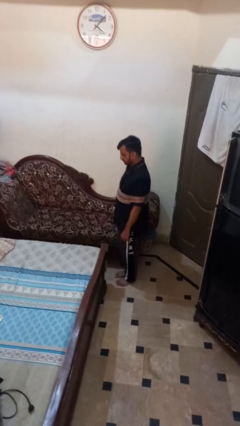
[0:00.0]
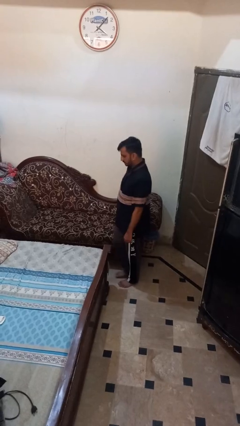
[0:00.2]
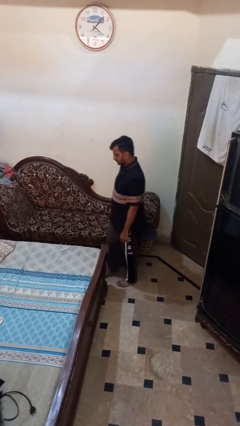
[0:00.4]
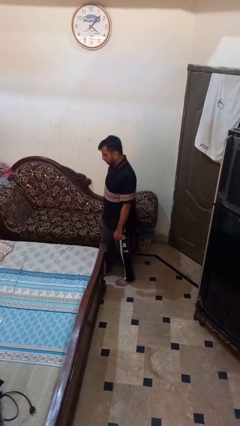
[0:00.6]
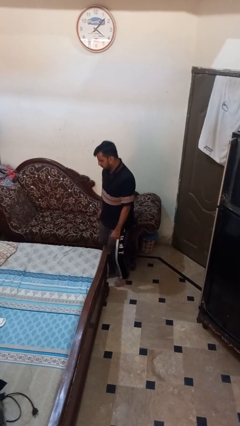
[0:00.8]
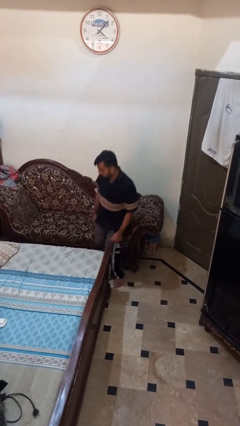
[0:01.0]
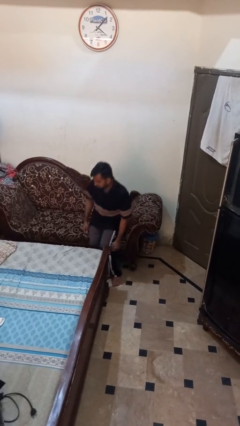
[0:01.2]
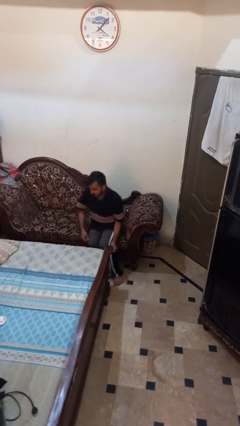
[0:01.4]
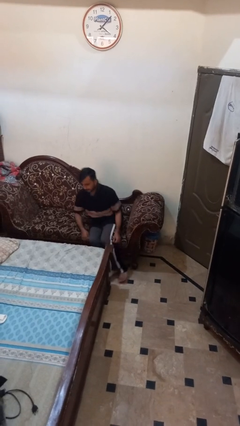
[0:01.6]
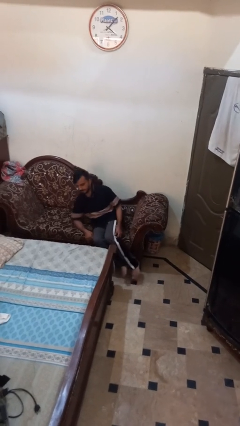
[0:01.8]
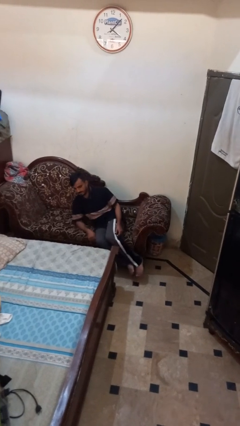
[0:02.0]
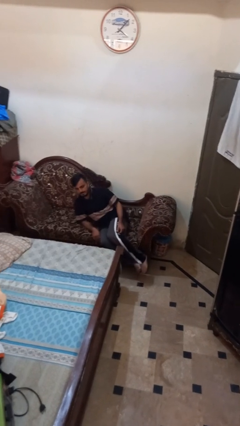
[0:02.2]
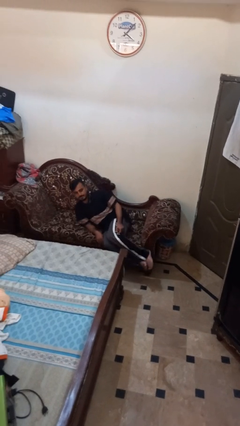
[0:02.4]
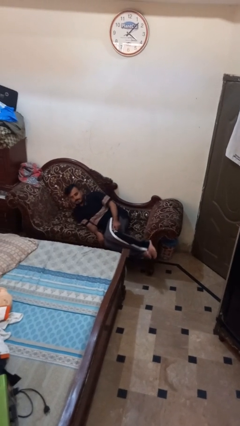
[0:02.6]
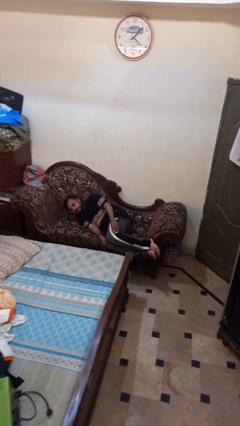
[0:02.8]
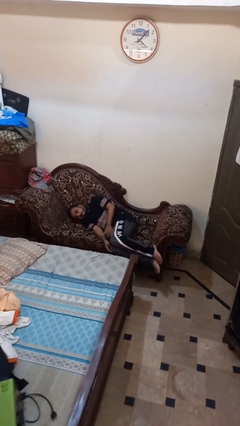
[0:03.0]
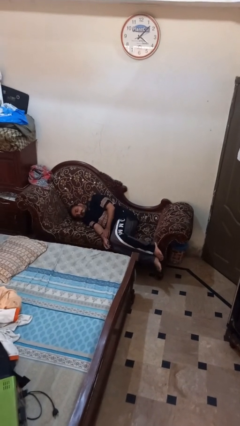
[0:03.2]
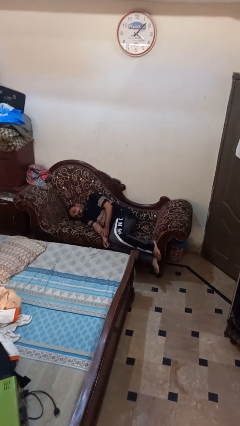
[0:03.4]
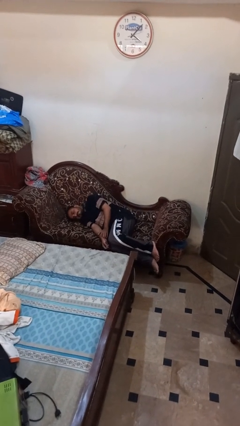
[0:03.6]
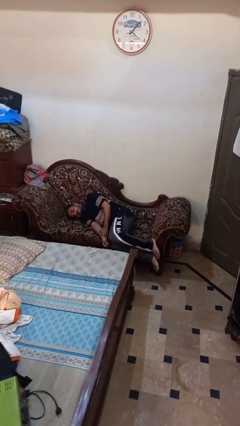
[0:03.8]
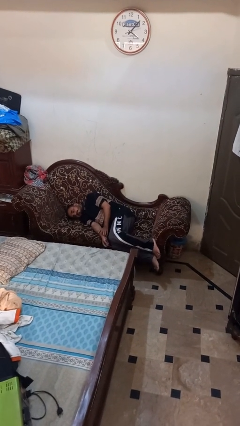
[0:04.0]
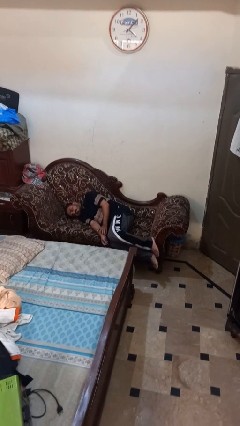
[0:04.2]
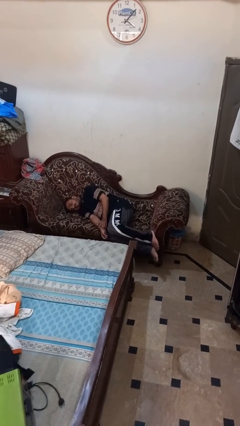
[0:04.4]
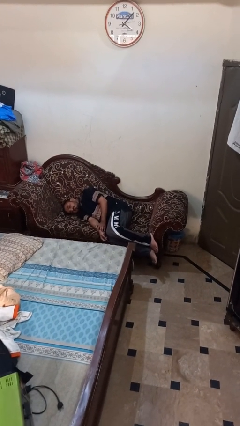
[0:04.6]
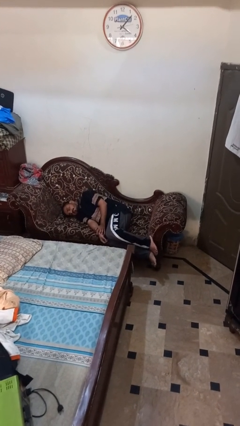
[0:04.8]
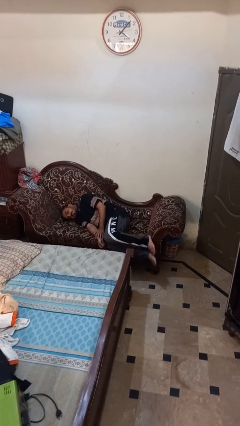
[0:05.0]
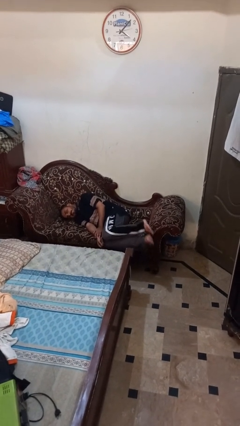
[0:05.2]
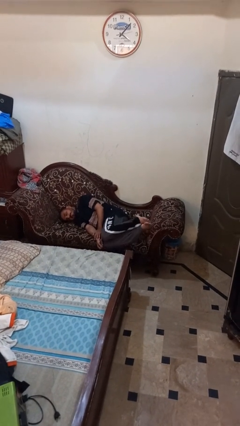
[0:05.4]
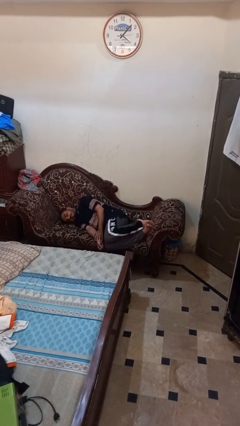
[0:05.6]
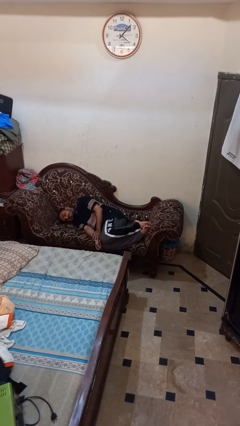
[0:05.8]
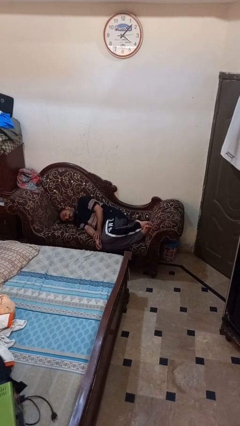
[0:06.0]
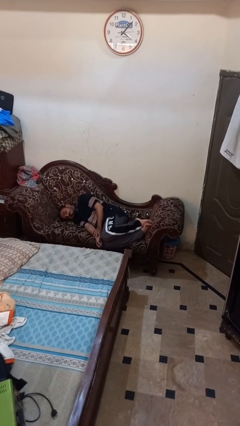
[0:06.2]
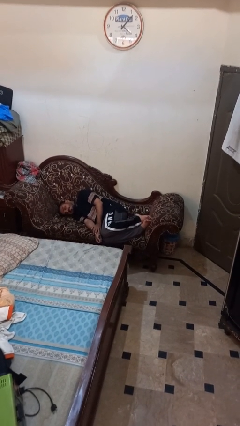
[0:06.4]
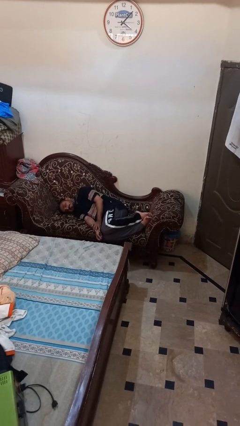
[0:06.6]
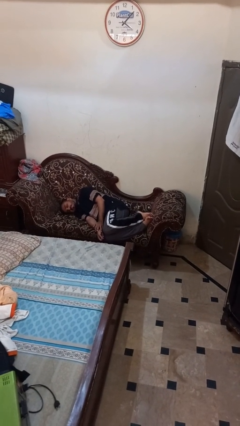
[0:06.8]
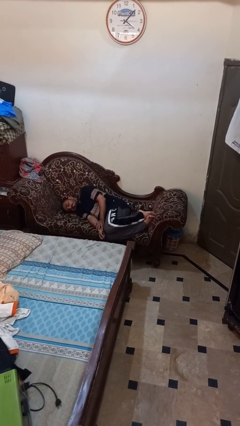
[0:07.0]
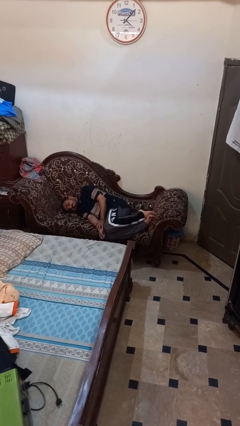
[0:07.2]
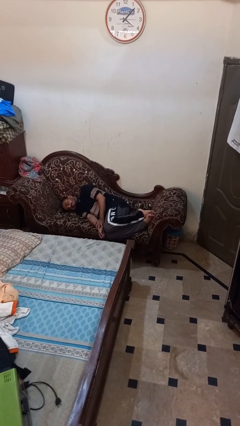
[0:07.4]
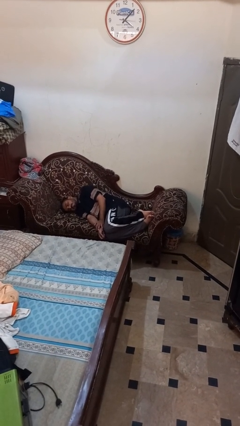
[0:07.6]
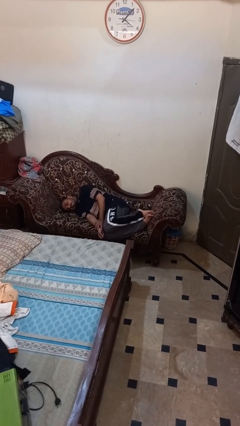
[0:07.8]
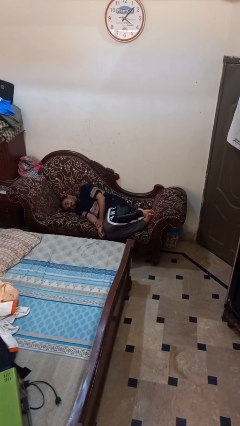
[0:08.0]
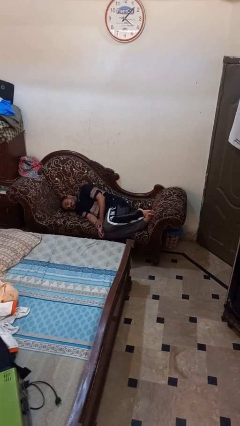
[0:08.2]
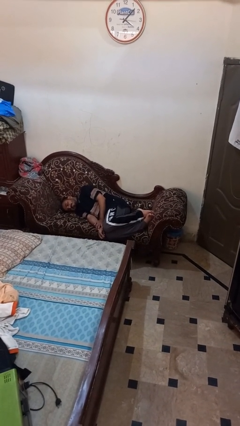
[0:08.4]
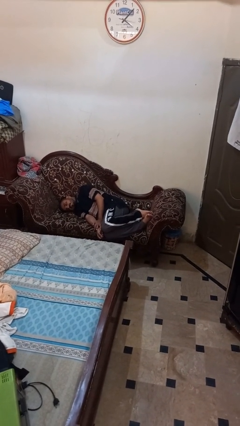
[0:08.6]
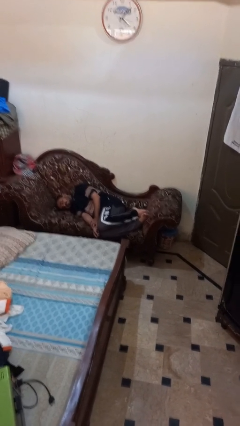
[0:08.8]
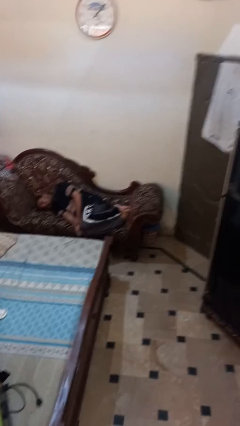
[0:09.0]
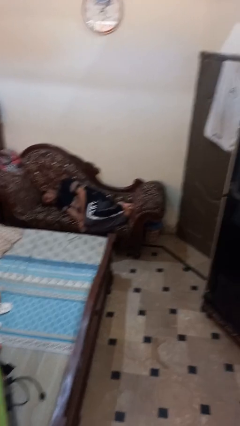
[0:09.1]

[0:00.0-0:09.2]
person lies down on couch

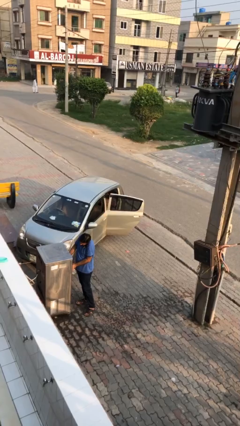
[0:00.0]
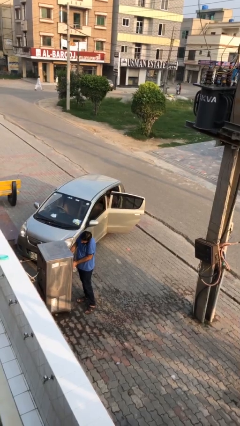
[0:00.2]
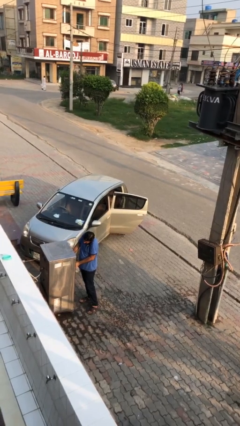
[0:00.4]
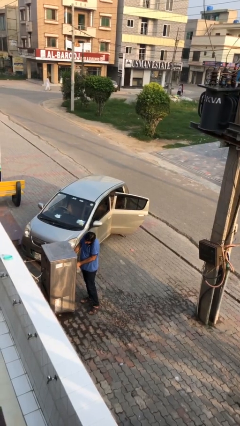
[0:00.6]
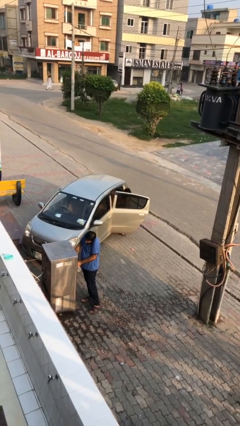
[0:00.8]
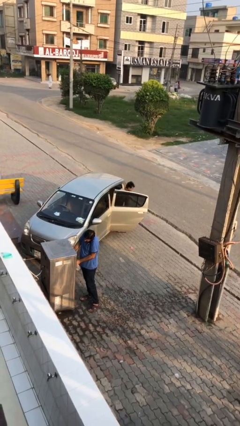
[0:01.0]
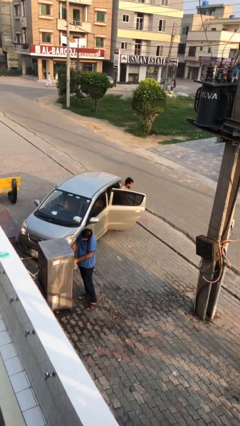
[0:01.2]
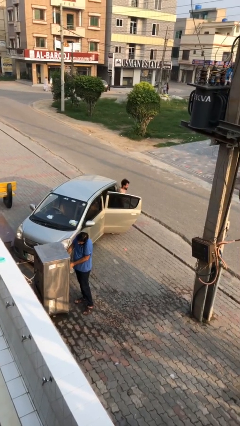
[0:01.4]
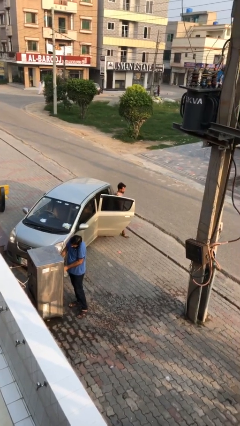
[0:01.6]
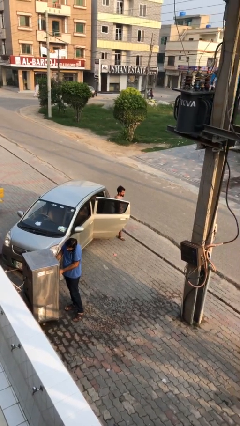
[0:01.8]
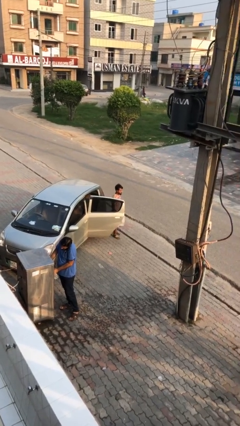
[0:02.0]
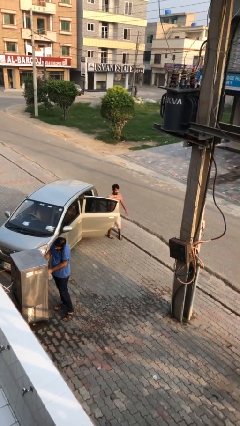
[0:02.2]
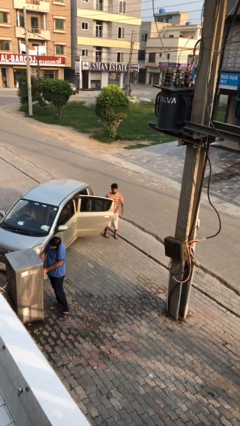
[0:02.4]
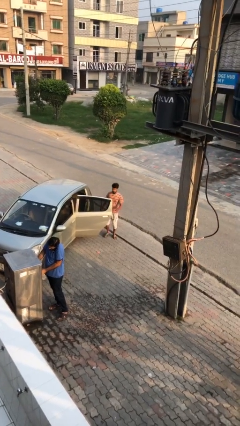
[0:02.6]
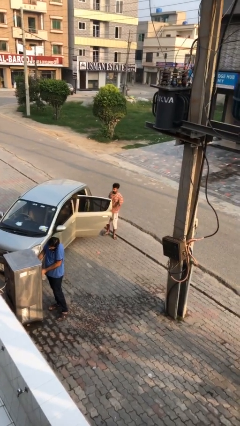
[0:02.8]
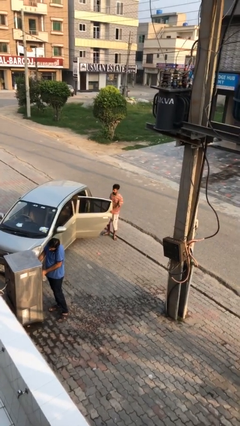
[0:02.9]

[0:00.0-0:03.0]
person exits car

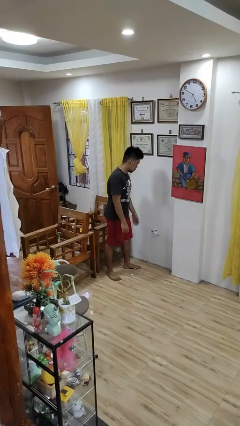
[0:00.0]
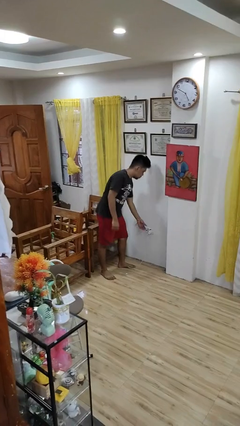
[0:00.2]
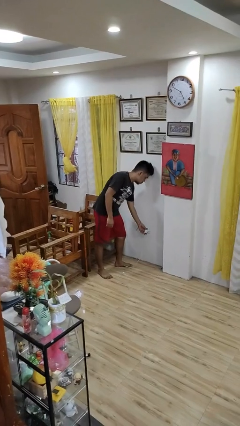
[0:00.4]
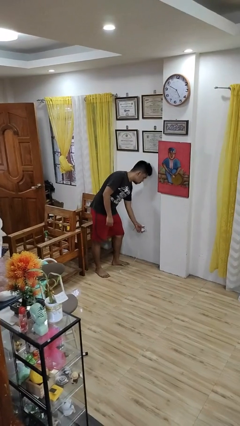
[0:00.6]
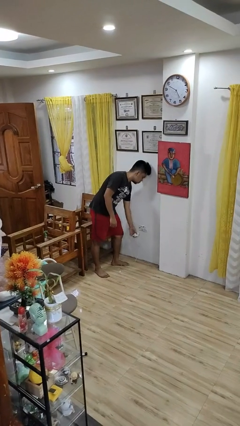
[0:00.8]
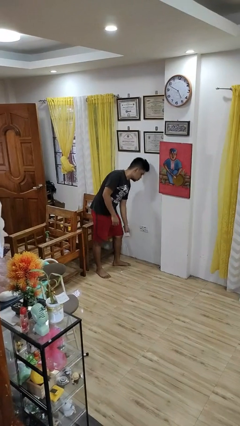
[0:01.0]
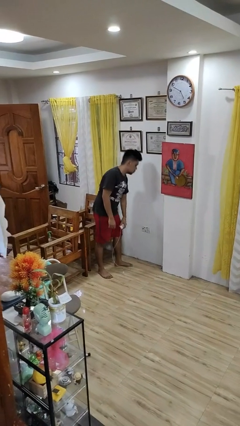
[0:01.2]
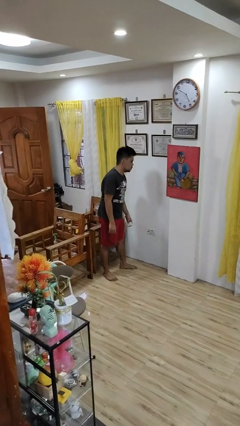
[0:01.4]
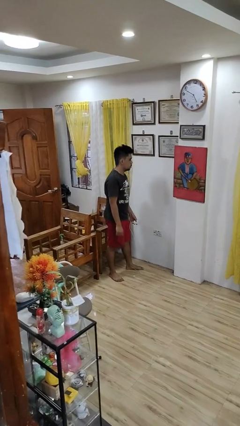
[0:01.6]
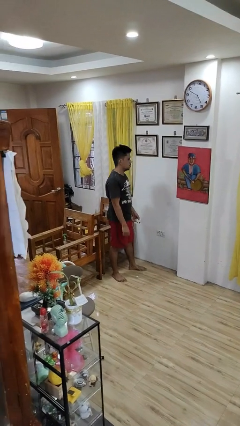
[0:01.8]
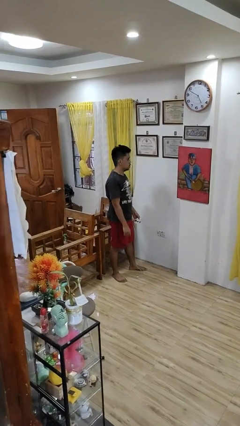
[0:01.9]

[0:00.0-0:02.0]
person unplugs from electrical socket

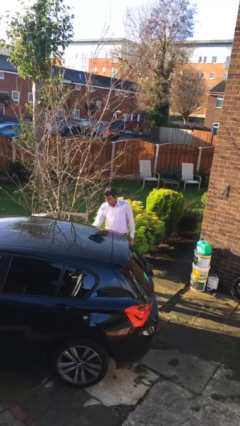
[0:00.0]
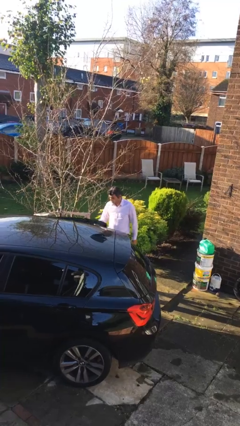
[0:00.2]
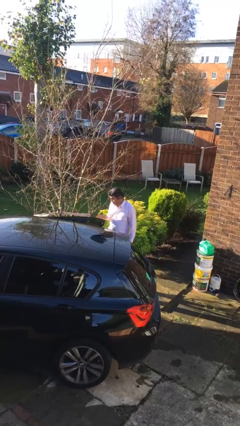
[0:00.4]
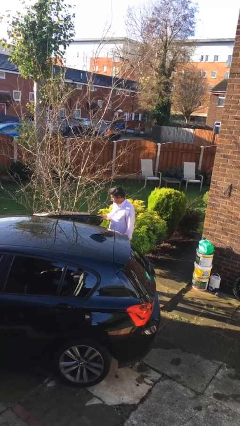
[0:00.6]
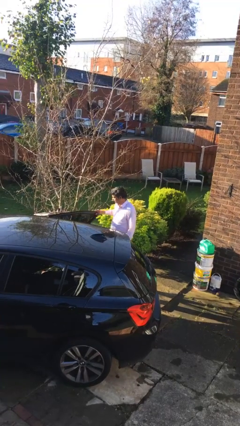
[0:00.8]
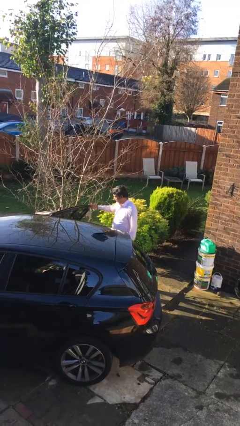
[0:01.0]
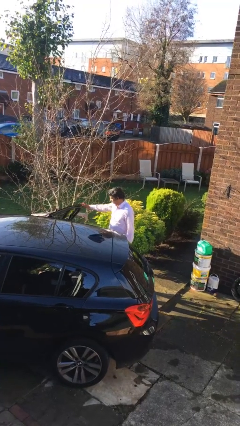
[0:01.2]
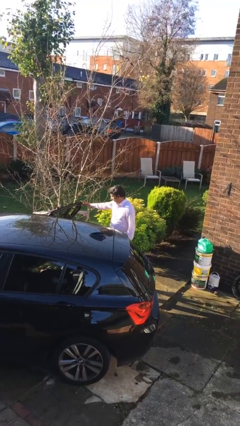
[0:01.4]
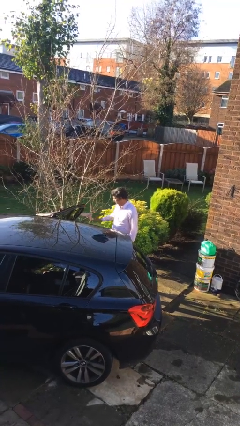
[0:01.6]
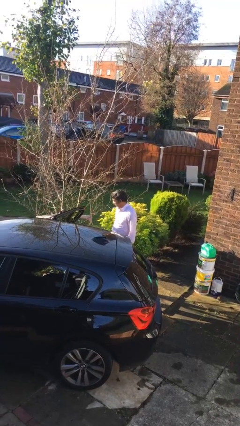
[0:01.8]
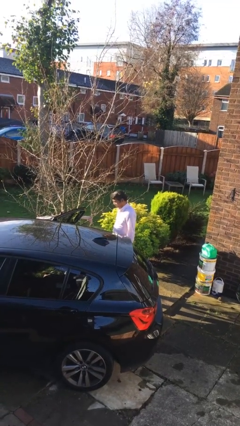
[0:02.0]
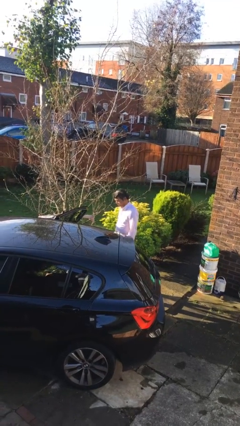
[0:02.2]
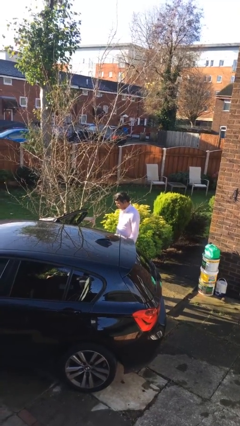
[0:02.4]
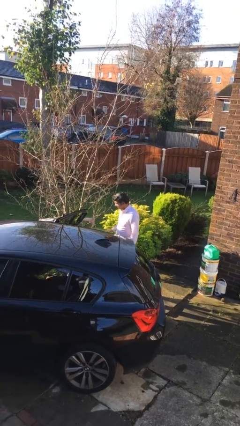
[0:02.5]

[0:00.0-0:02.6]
person opens car door

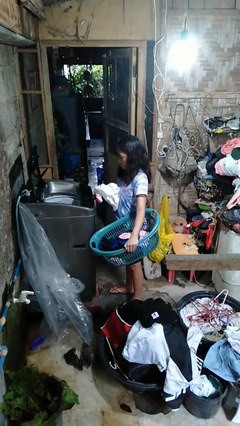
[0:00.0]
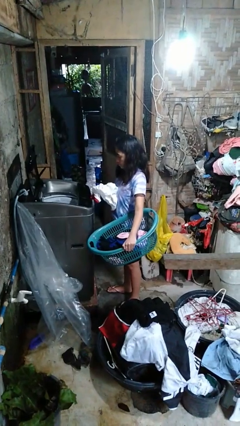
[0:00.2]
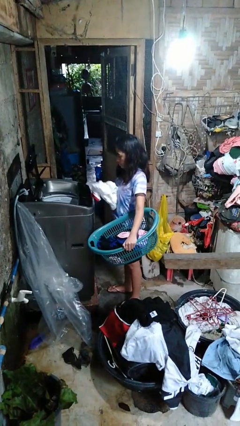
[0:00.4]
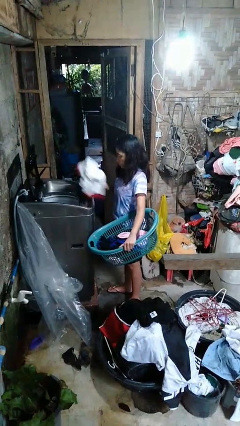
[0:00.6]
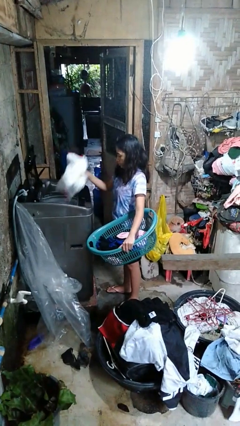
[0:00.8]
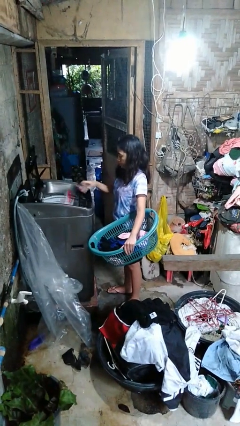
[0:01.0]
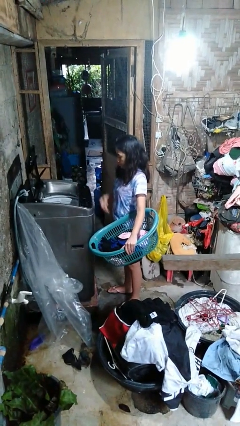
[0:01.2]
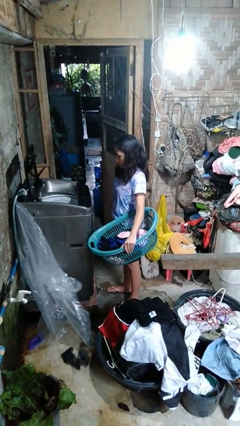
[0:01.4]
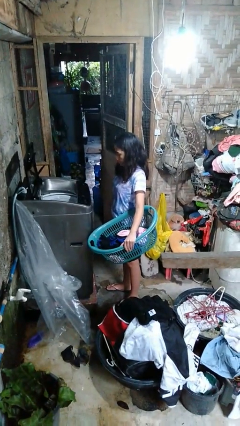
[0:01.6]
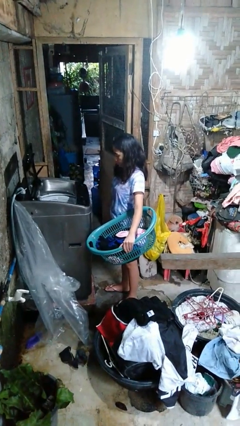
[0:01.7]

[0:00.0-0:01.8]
person loads clotheswasher
